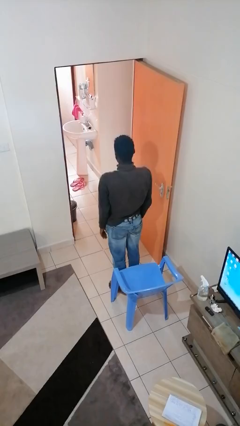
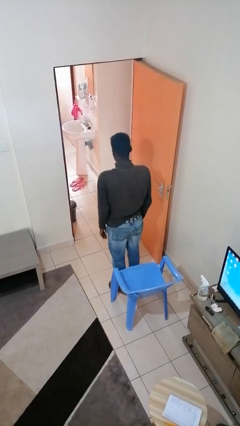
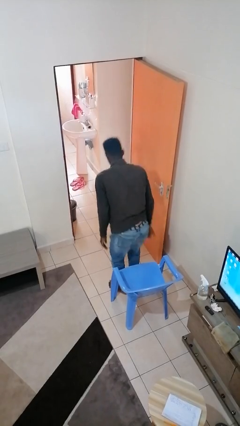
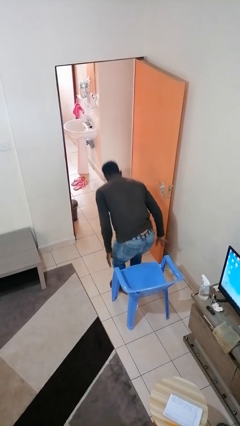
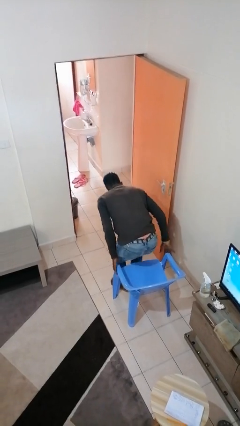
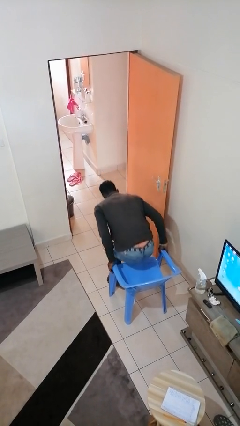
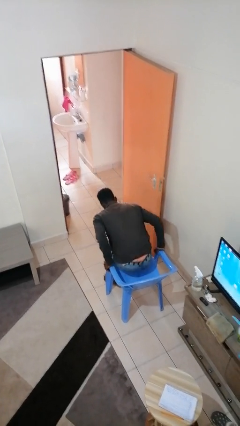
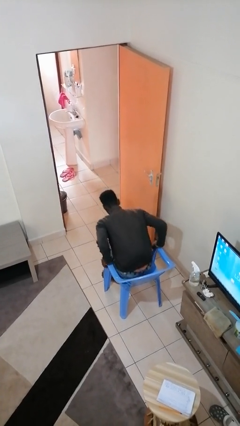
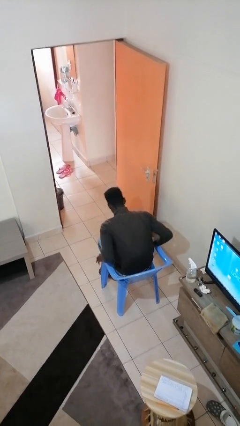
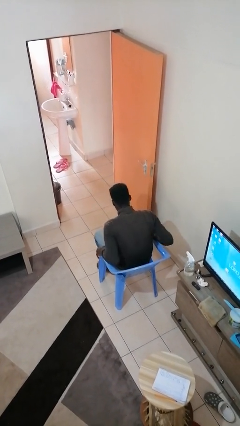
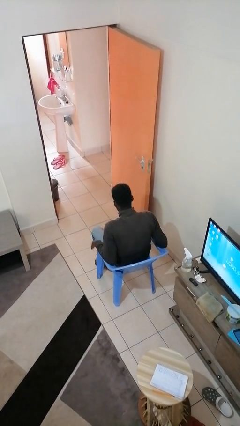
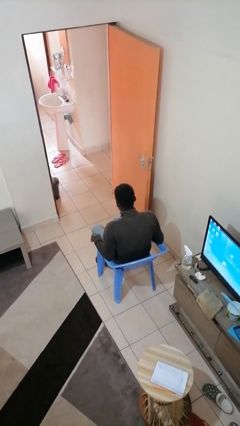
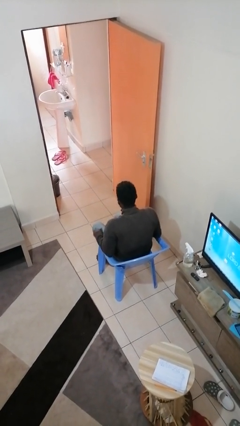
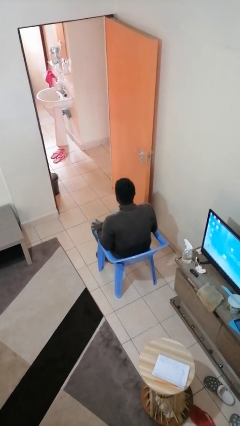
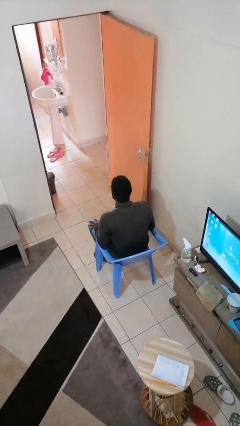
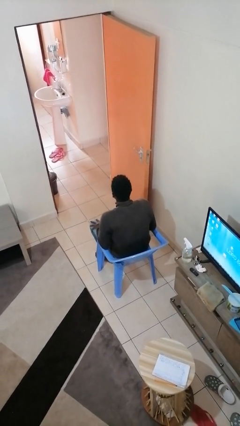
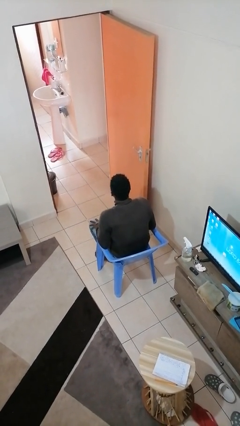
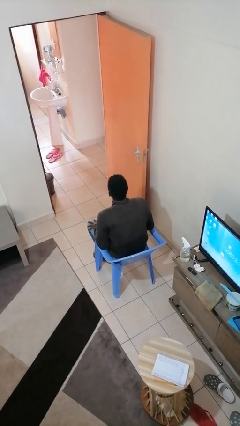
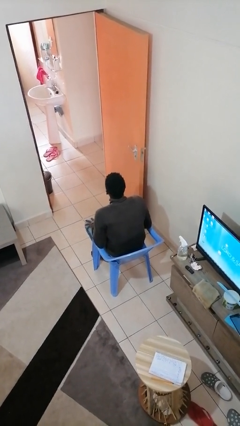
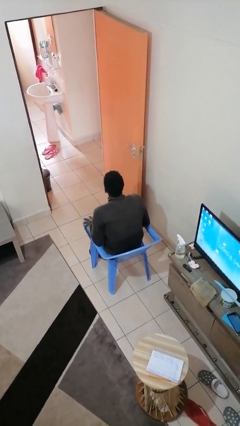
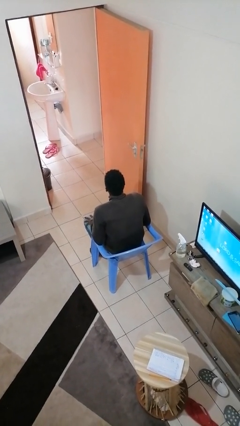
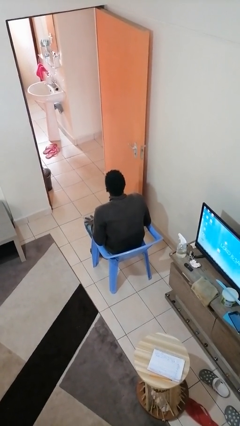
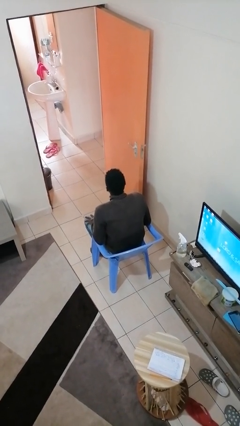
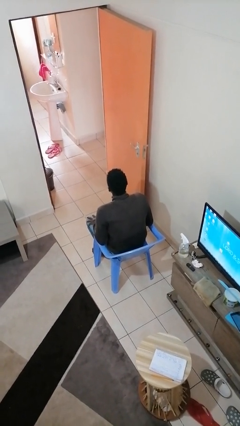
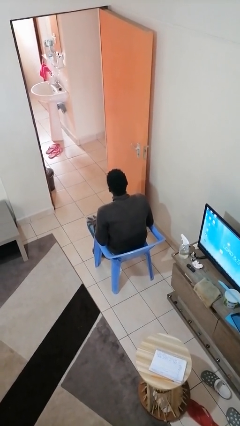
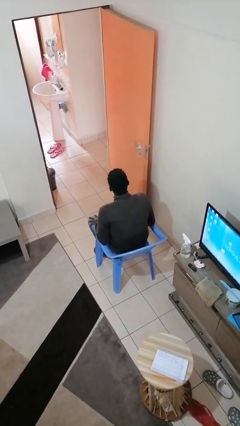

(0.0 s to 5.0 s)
person sits down

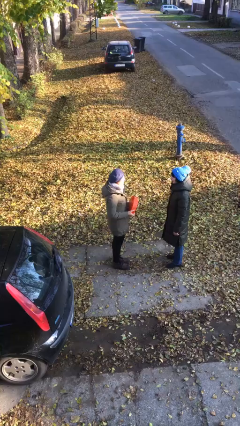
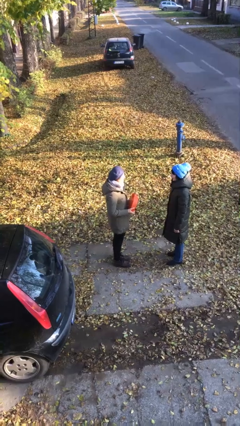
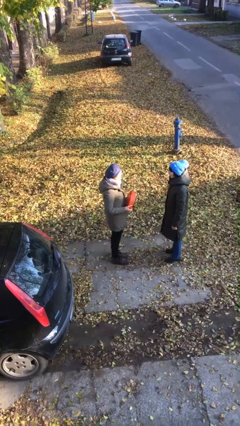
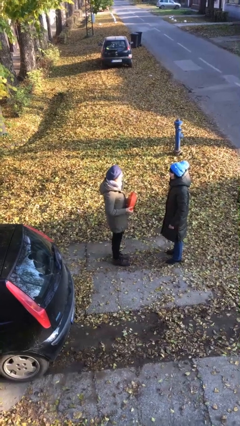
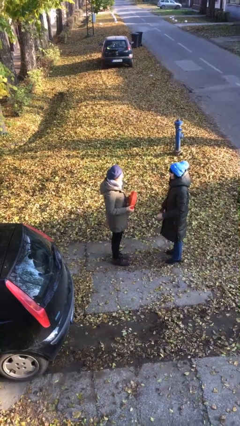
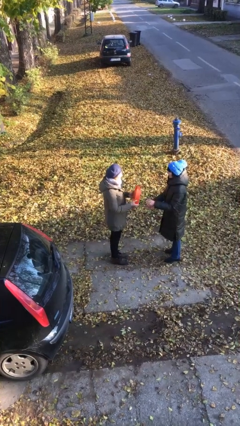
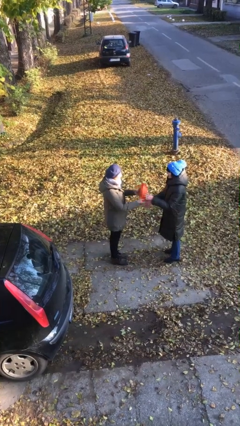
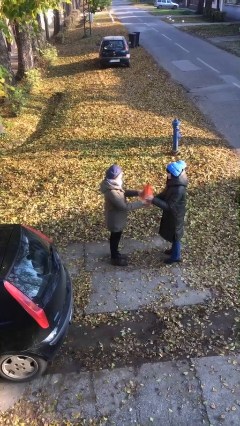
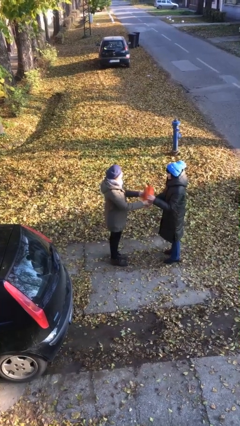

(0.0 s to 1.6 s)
person transfers object to person

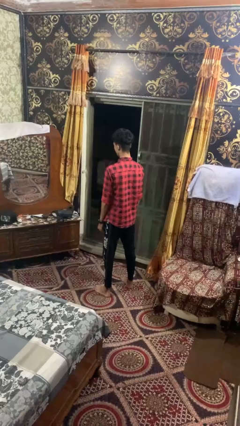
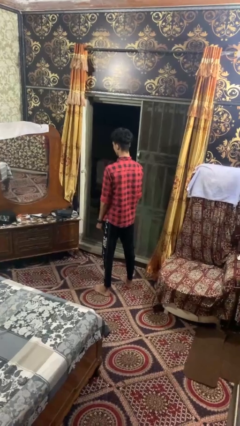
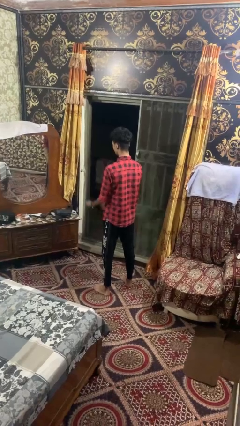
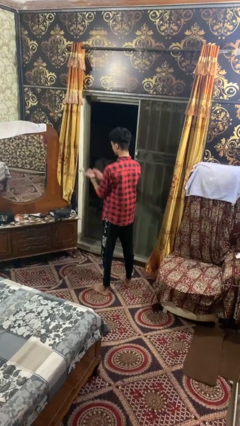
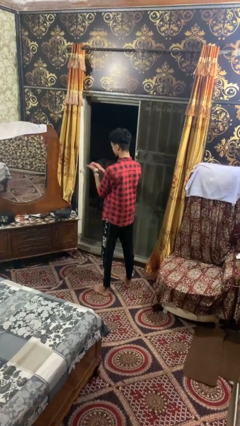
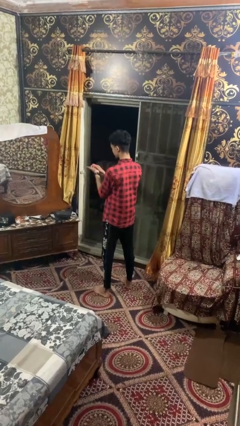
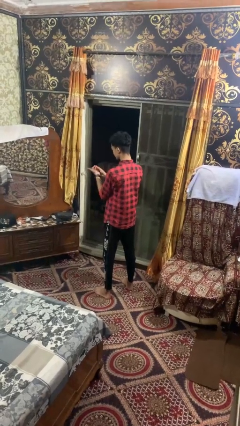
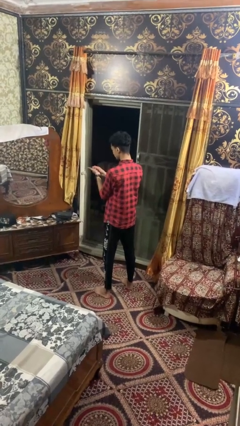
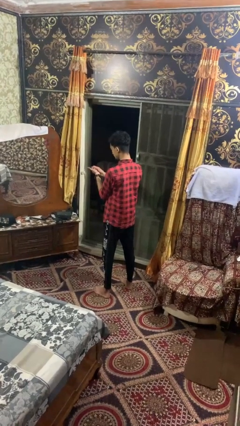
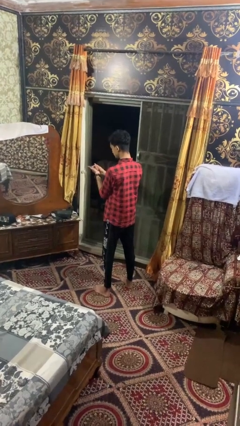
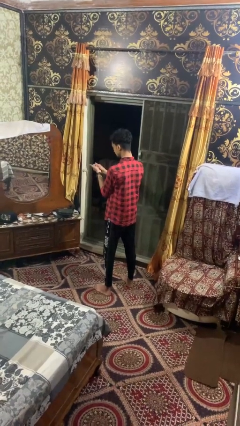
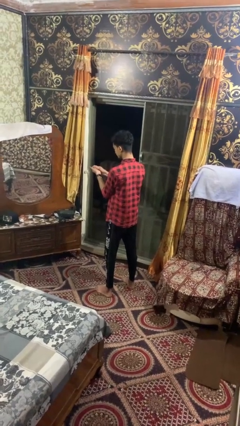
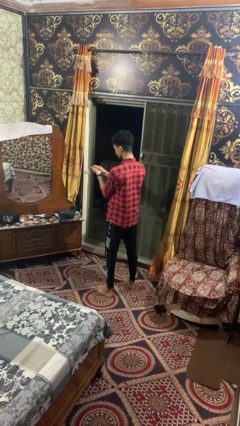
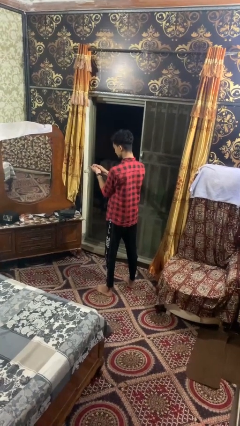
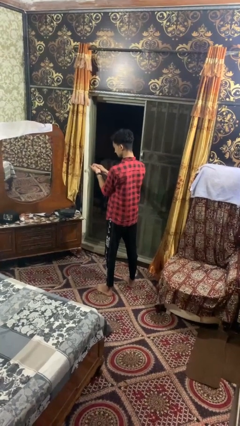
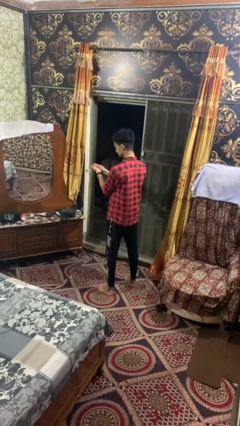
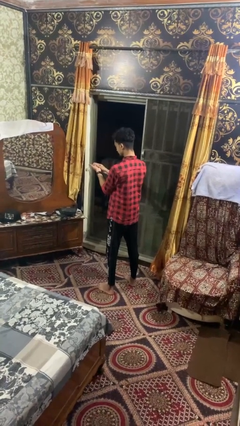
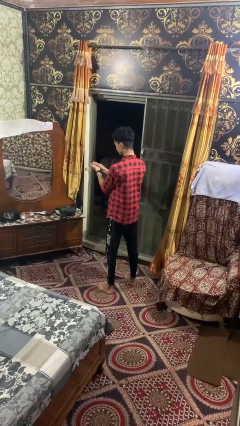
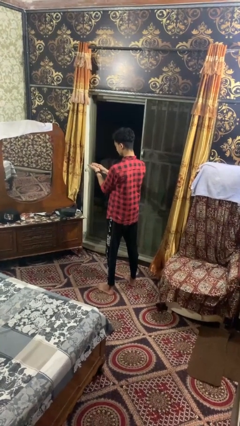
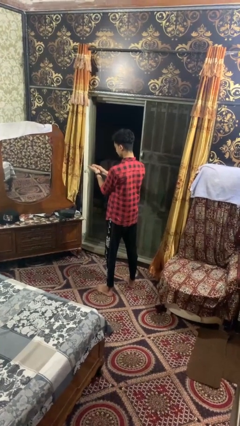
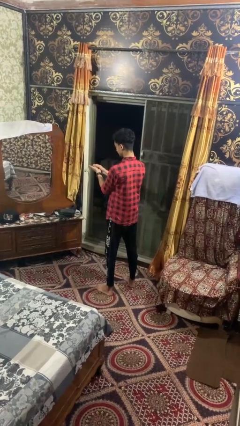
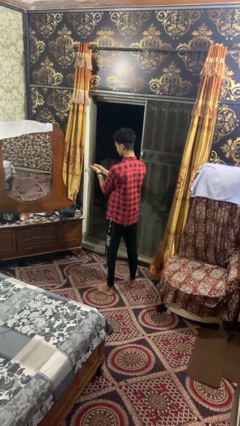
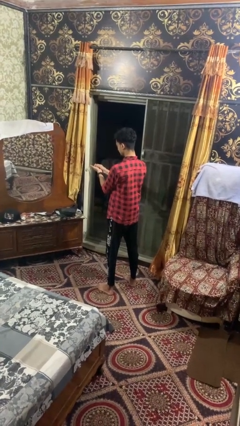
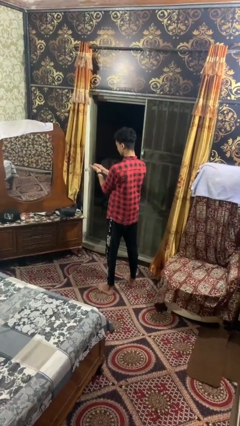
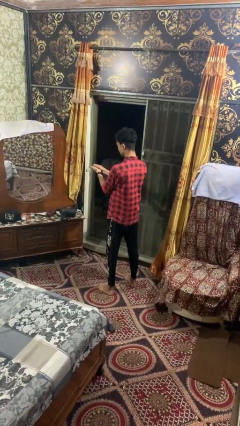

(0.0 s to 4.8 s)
person cracks knuckles

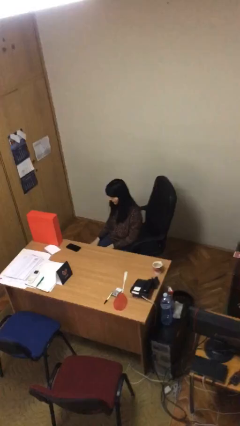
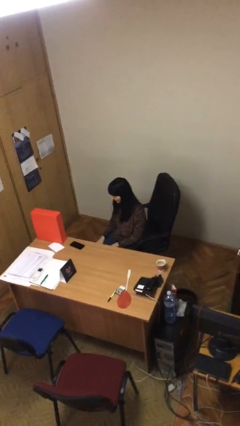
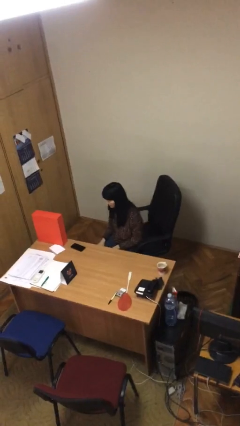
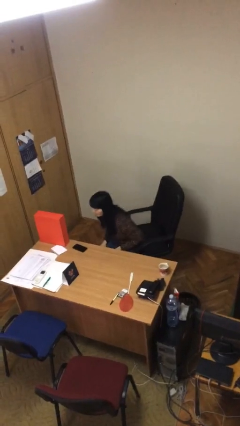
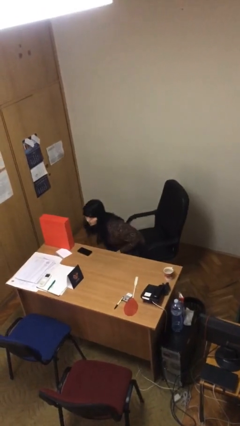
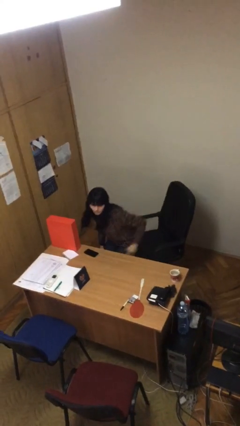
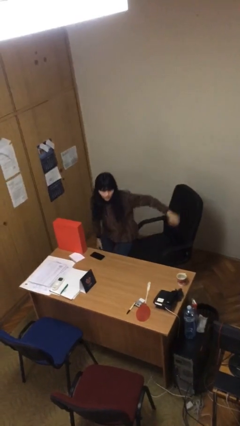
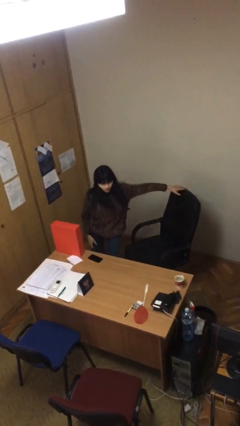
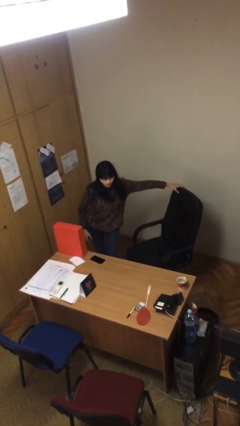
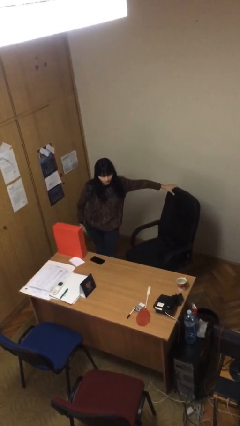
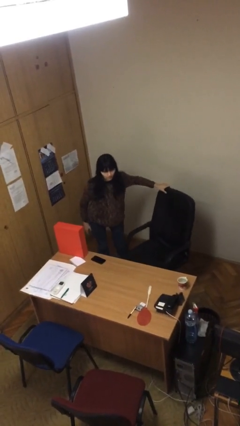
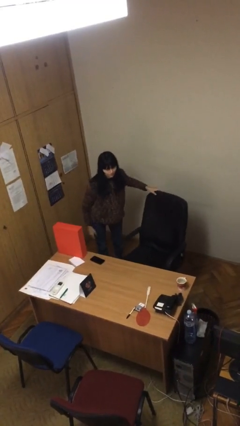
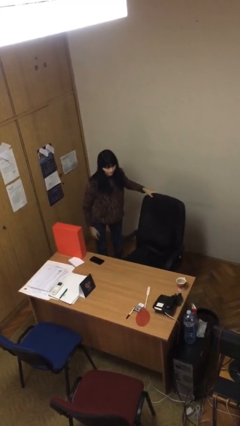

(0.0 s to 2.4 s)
person stands up

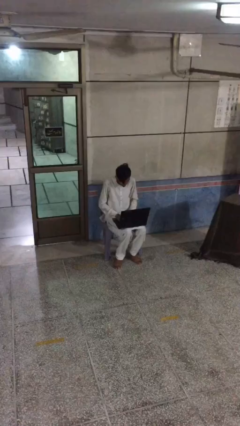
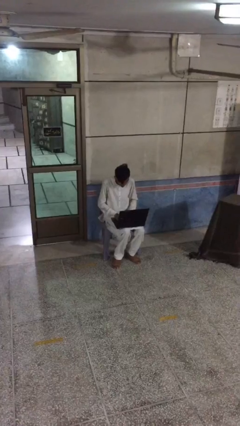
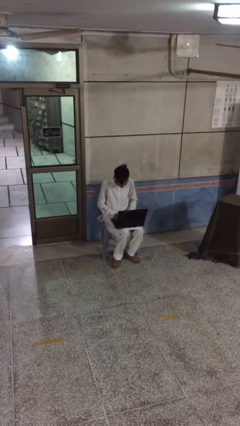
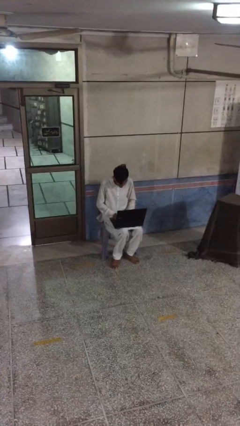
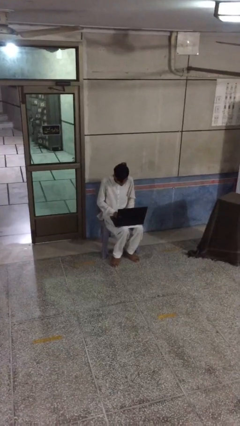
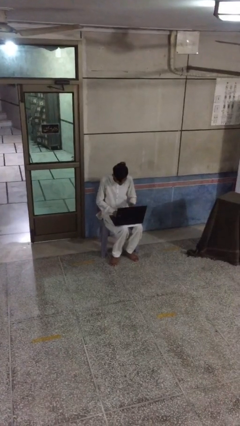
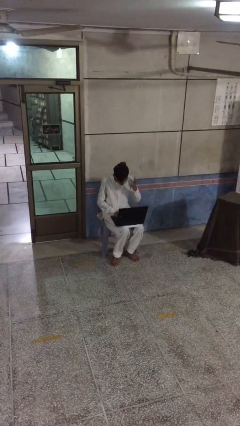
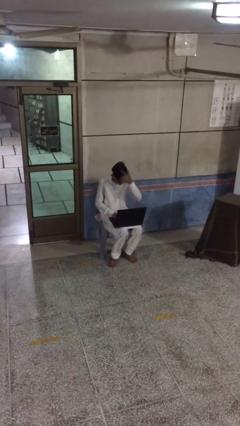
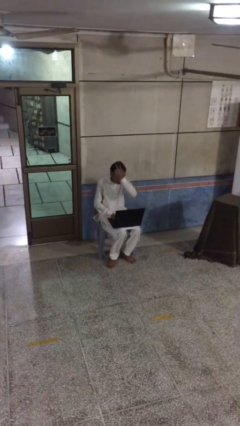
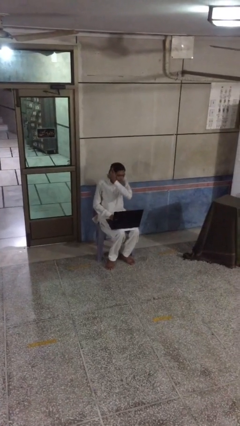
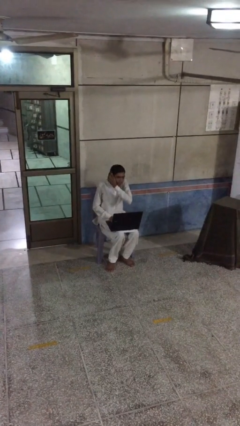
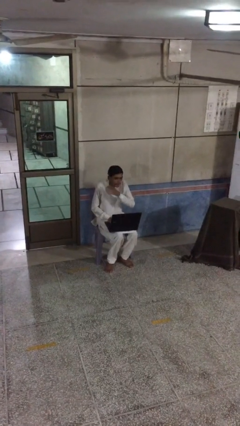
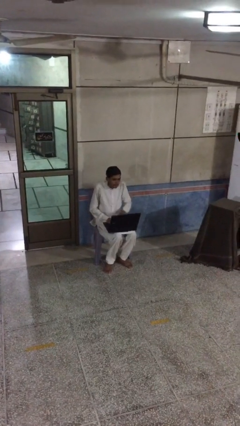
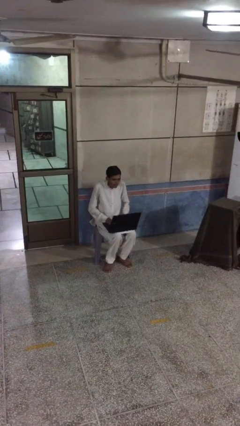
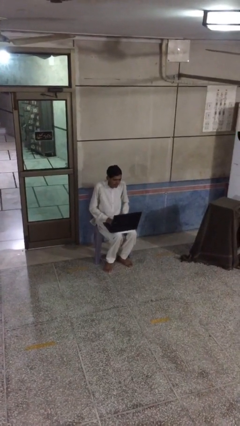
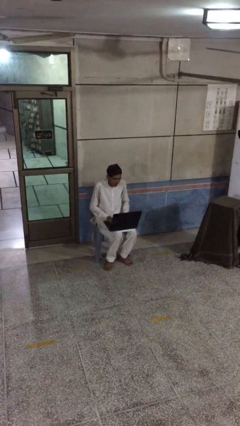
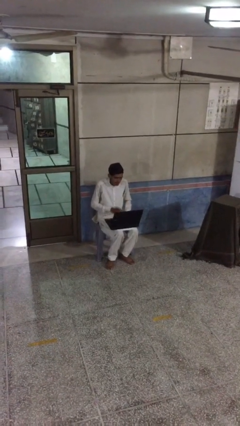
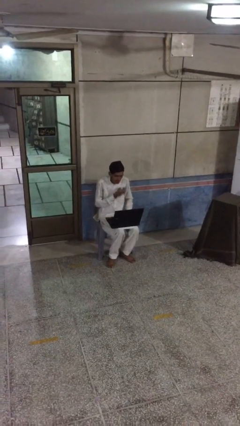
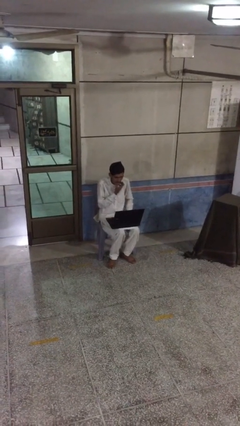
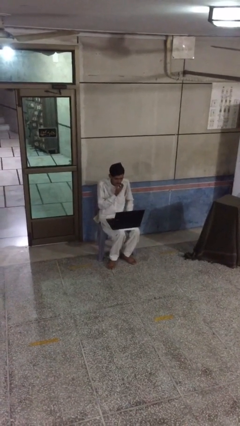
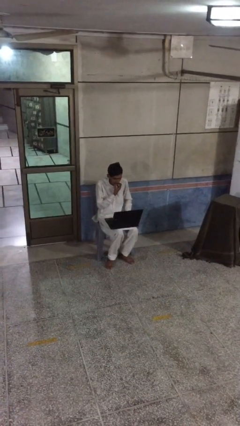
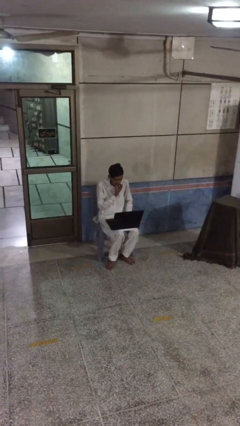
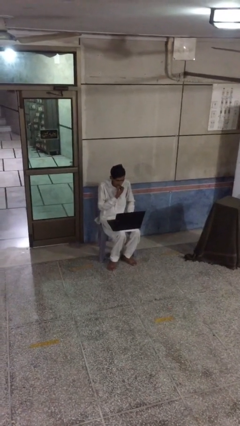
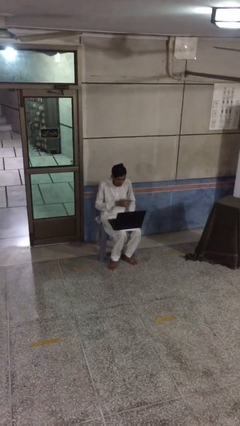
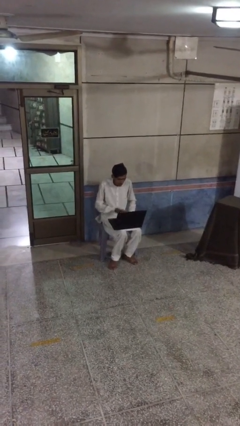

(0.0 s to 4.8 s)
person interacts with laptop
